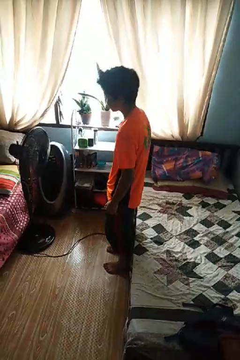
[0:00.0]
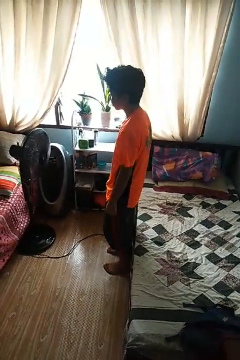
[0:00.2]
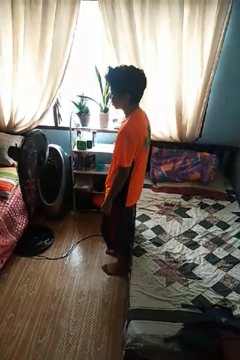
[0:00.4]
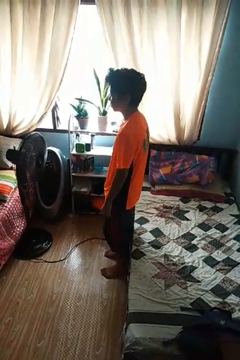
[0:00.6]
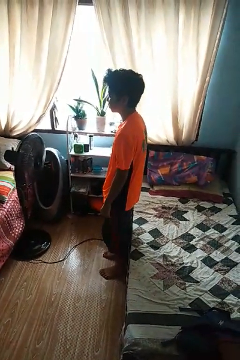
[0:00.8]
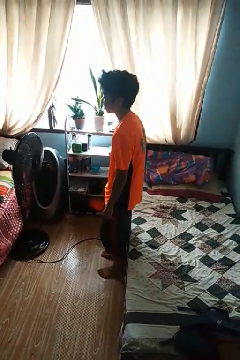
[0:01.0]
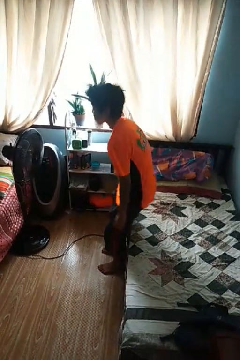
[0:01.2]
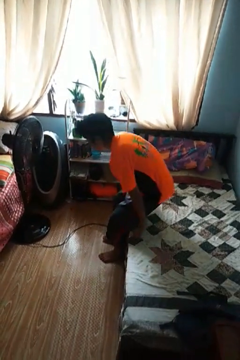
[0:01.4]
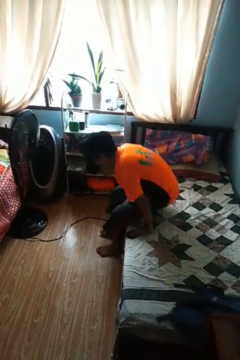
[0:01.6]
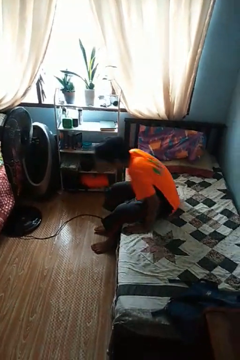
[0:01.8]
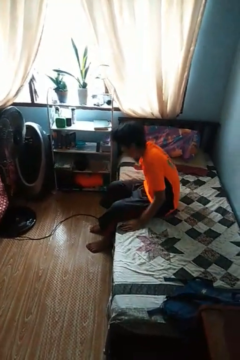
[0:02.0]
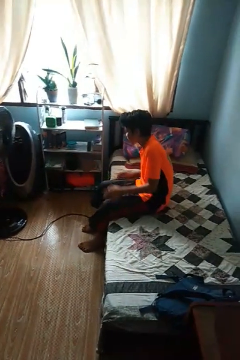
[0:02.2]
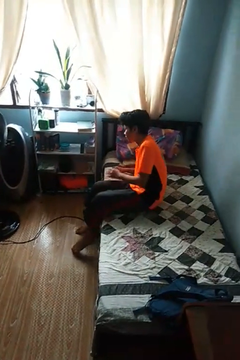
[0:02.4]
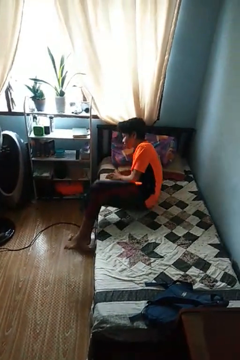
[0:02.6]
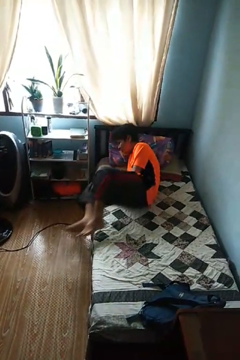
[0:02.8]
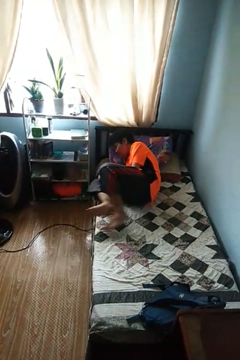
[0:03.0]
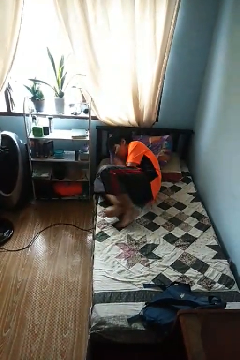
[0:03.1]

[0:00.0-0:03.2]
person lies down on bed

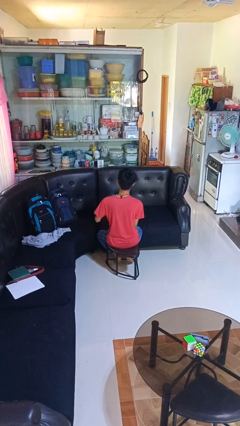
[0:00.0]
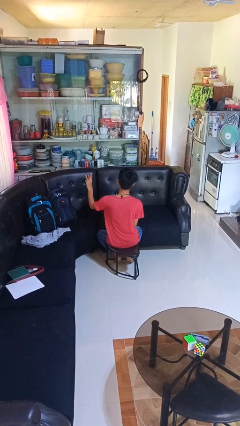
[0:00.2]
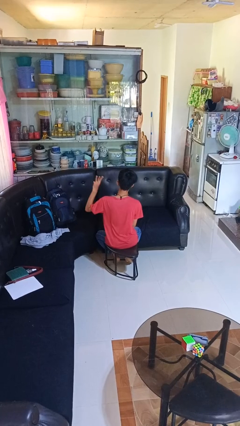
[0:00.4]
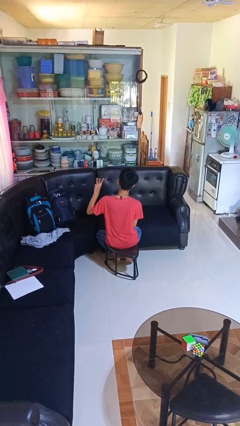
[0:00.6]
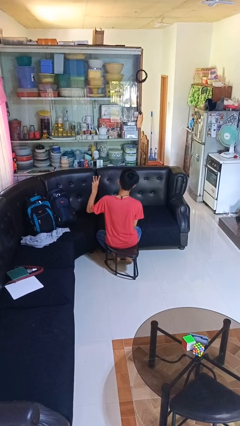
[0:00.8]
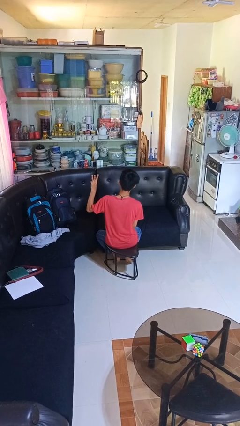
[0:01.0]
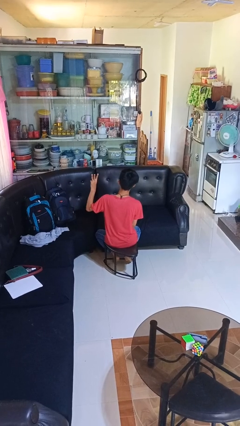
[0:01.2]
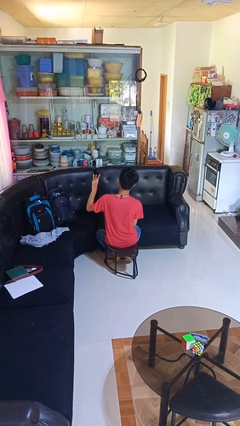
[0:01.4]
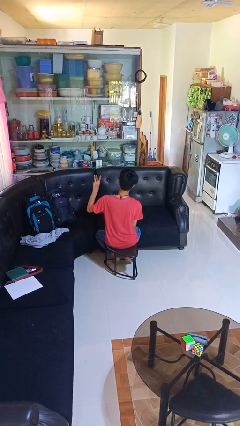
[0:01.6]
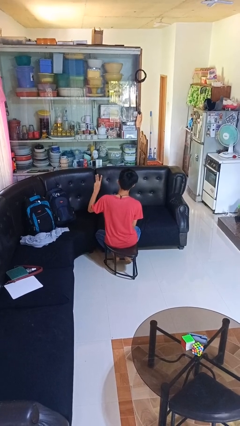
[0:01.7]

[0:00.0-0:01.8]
person gestures number three

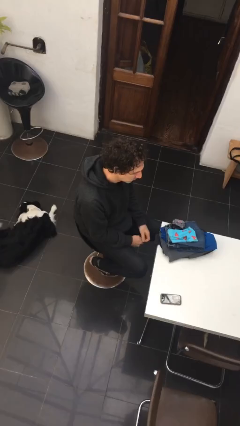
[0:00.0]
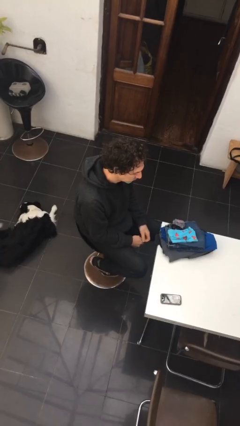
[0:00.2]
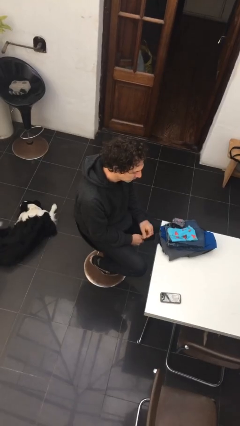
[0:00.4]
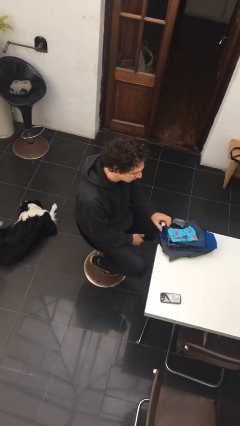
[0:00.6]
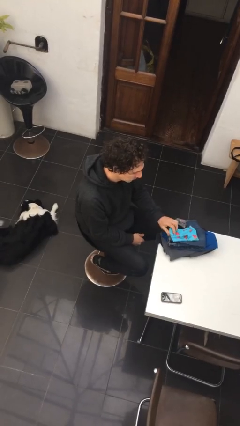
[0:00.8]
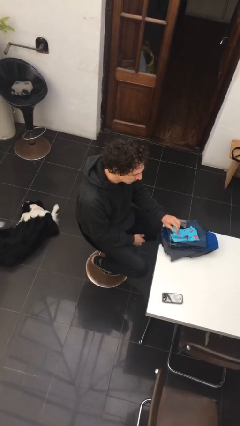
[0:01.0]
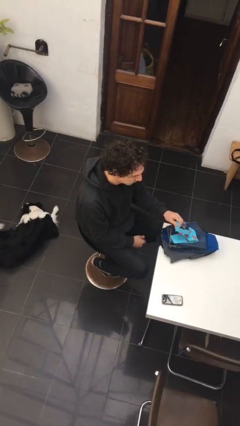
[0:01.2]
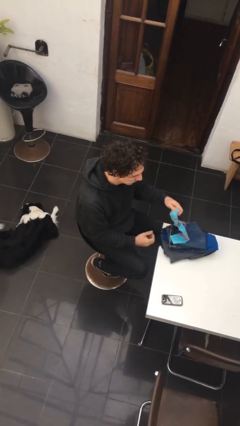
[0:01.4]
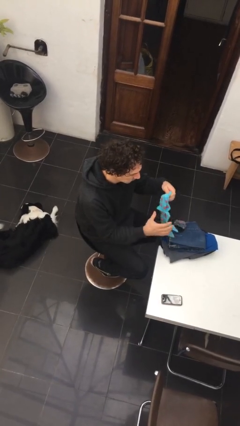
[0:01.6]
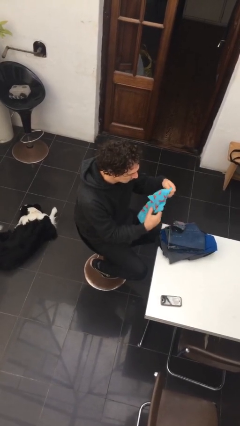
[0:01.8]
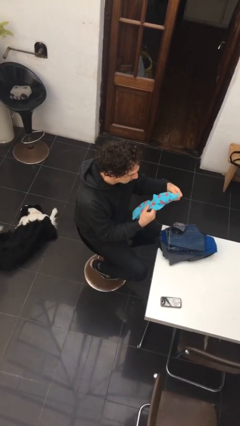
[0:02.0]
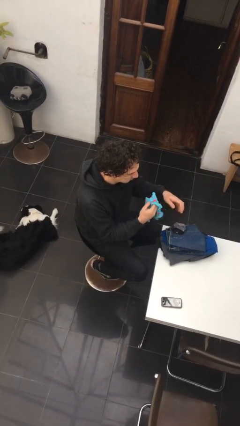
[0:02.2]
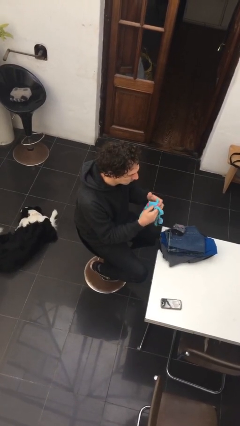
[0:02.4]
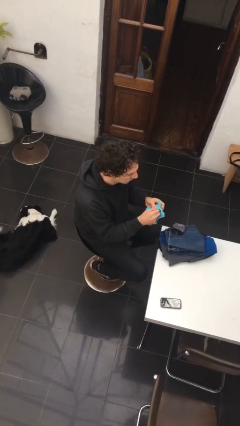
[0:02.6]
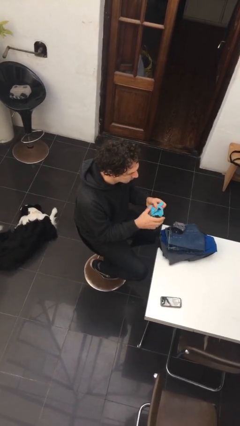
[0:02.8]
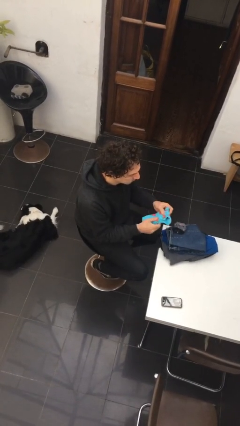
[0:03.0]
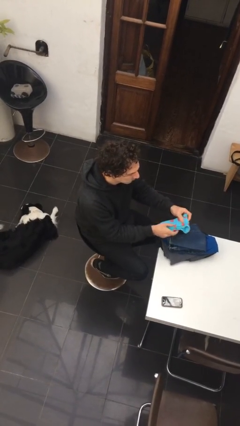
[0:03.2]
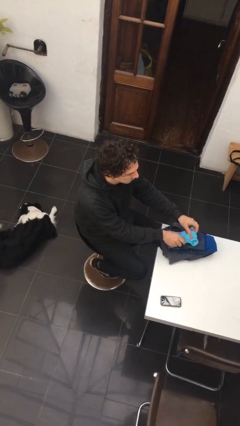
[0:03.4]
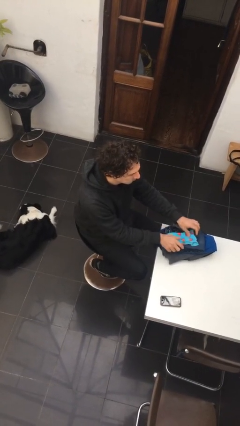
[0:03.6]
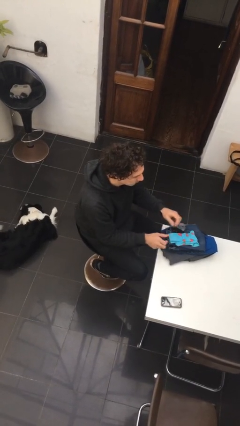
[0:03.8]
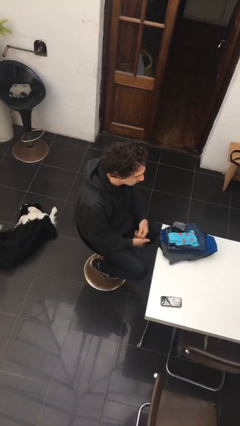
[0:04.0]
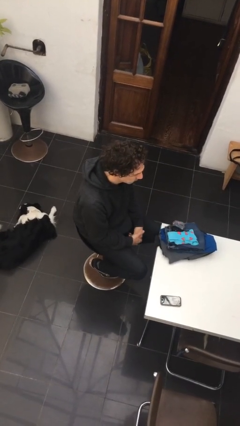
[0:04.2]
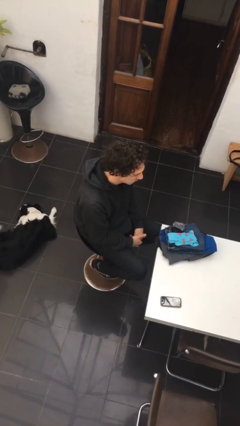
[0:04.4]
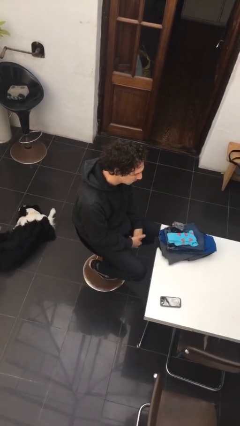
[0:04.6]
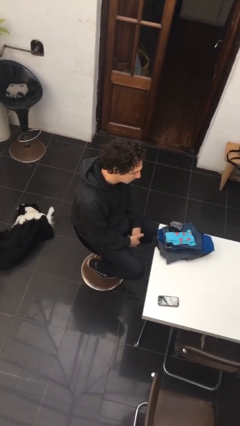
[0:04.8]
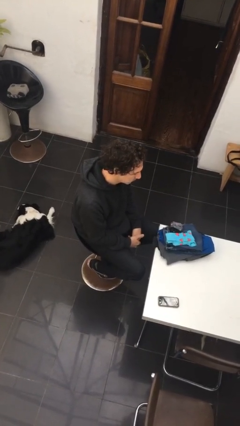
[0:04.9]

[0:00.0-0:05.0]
person folds socks

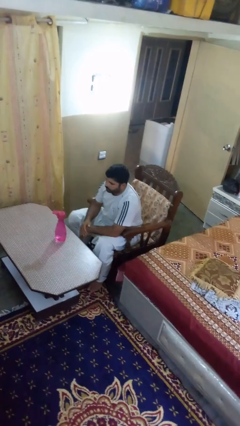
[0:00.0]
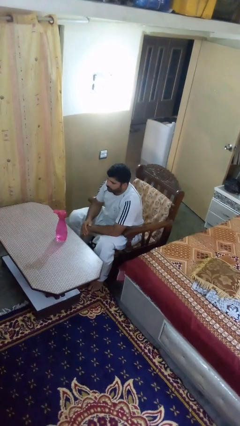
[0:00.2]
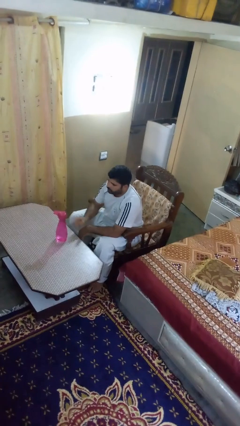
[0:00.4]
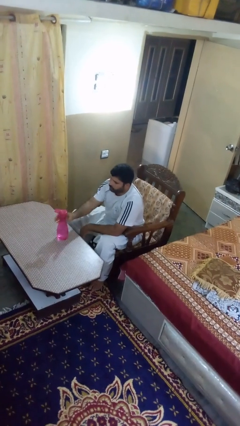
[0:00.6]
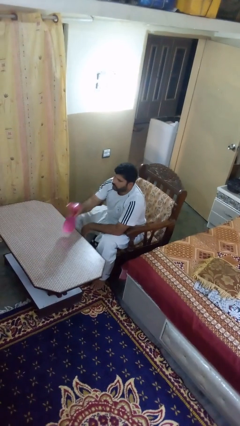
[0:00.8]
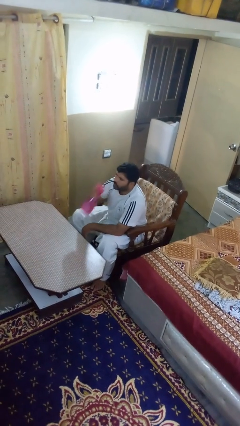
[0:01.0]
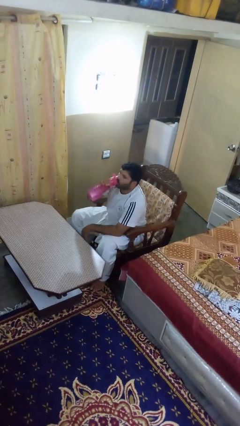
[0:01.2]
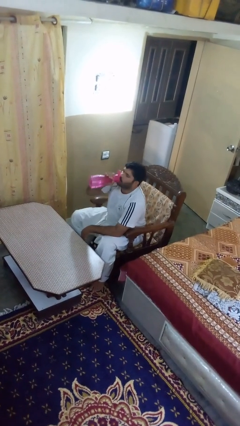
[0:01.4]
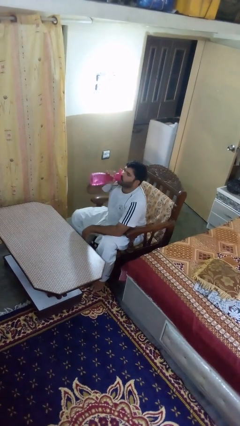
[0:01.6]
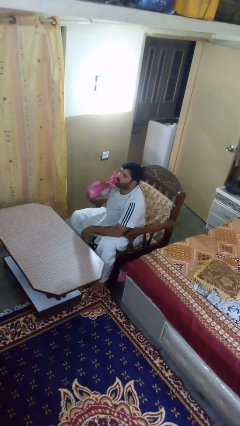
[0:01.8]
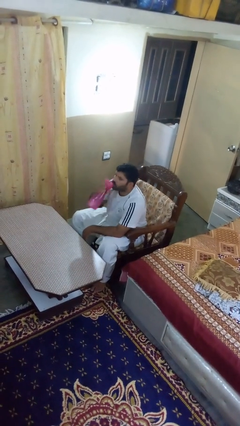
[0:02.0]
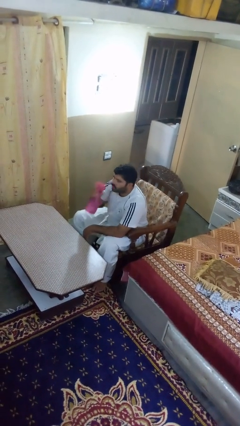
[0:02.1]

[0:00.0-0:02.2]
person drinks from bottle

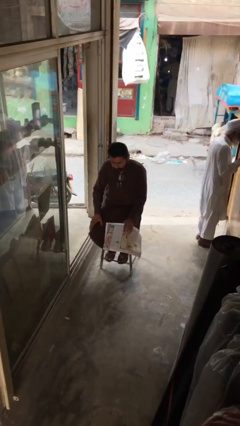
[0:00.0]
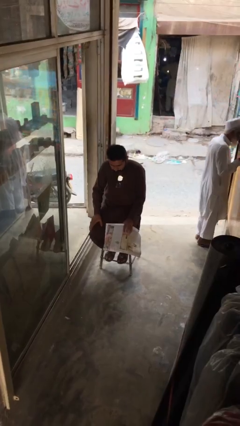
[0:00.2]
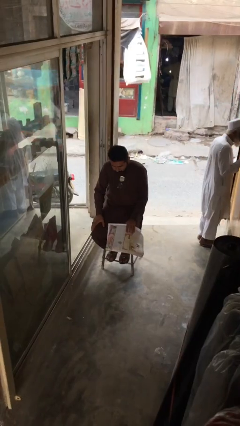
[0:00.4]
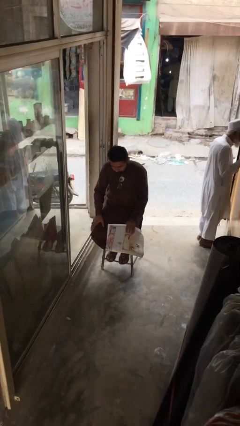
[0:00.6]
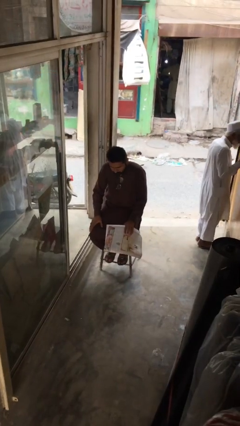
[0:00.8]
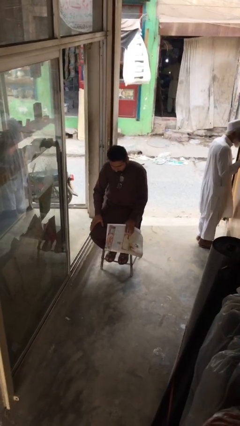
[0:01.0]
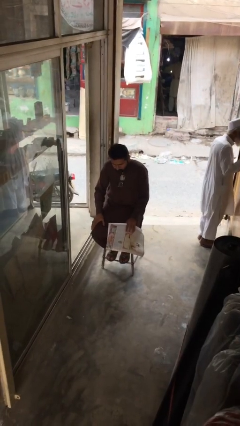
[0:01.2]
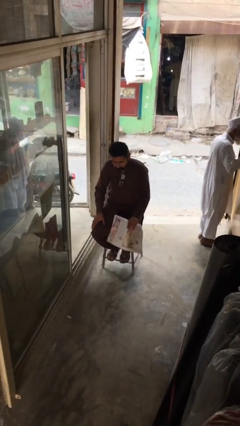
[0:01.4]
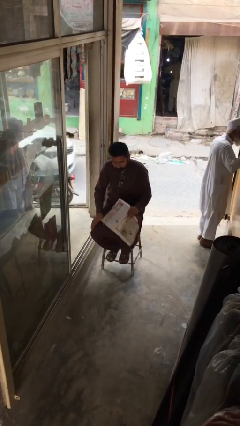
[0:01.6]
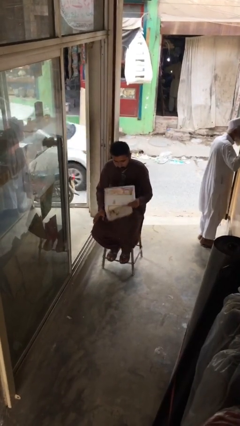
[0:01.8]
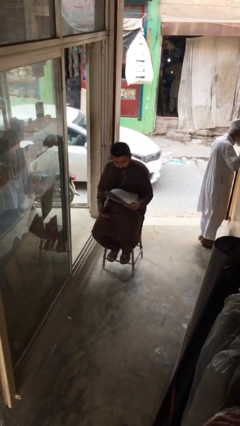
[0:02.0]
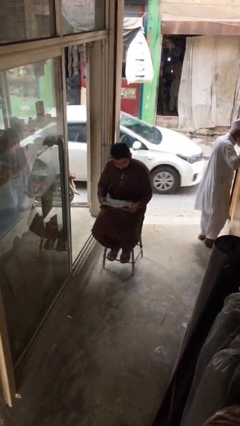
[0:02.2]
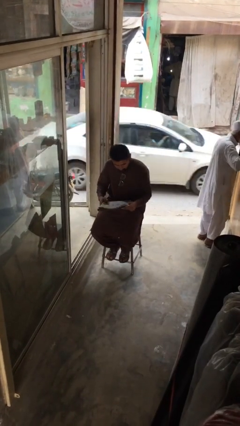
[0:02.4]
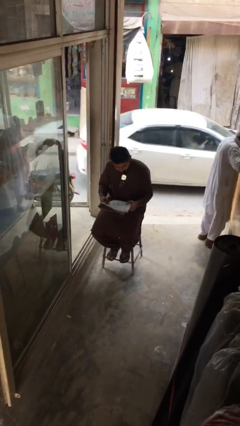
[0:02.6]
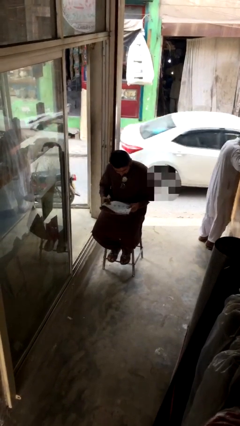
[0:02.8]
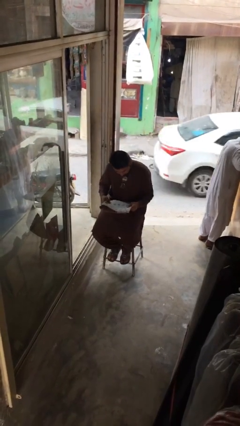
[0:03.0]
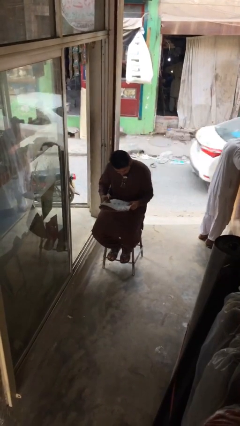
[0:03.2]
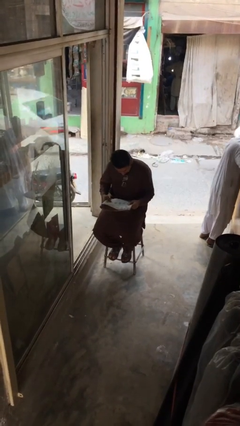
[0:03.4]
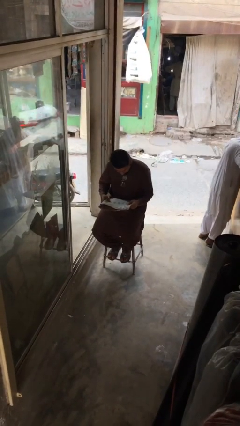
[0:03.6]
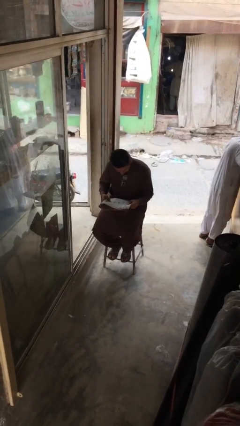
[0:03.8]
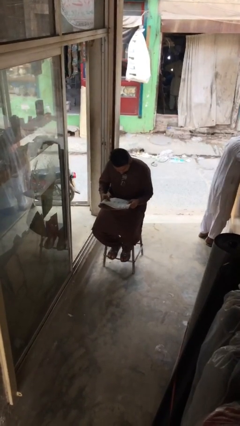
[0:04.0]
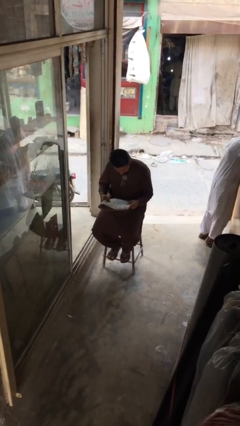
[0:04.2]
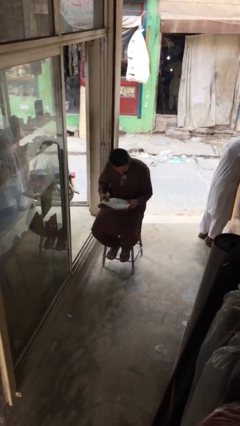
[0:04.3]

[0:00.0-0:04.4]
person reads document

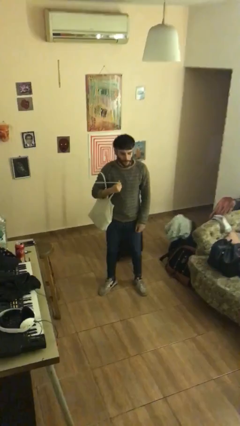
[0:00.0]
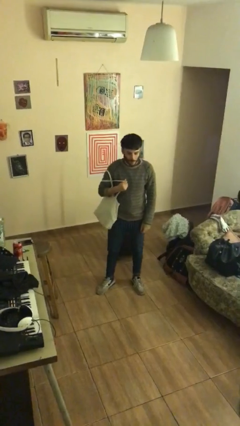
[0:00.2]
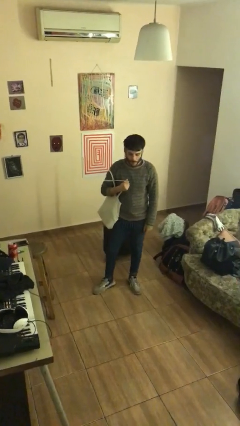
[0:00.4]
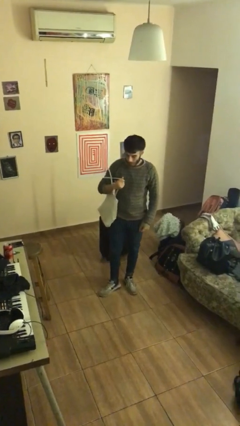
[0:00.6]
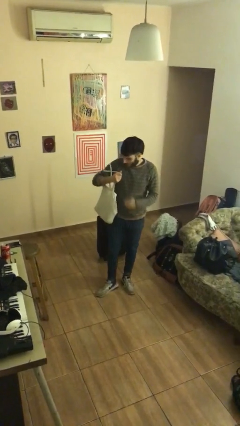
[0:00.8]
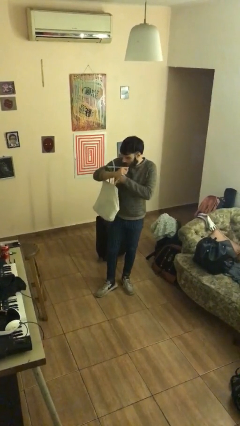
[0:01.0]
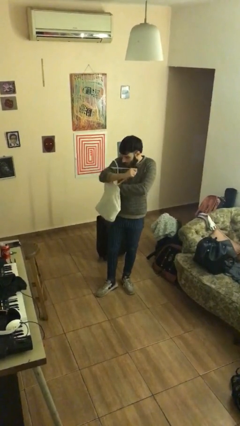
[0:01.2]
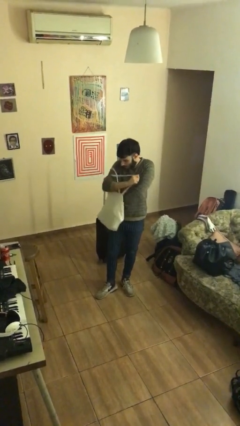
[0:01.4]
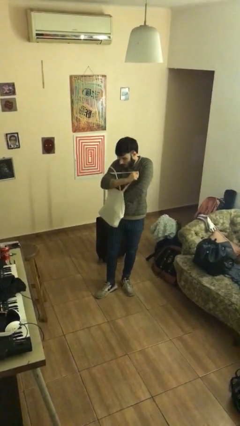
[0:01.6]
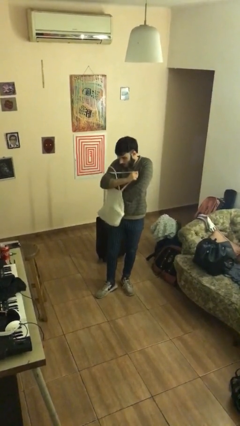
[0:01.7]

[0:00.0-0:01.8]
person searches in purse
